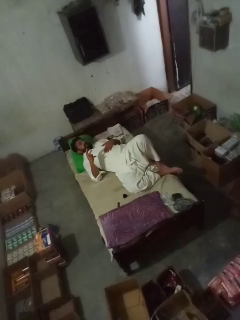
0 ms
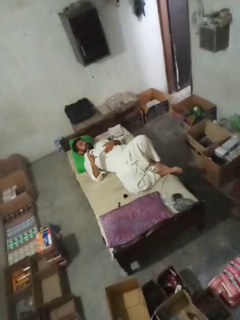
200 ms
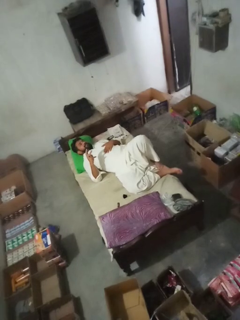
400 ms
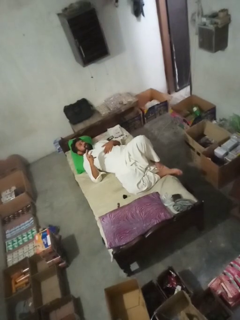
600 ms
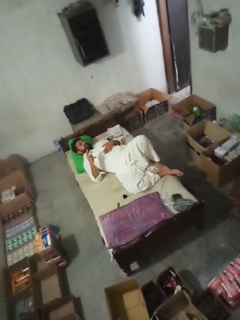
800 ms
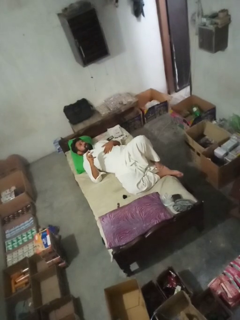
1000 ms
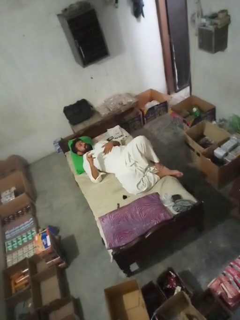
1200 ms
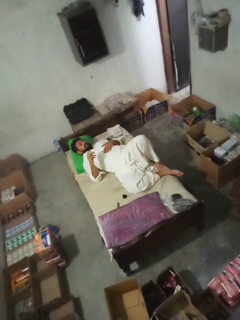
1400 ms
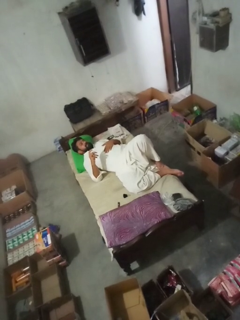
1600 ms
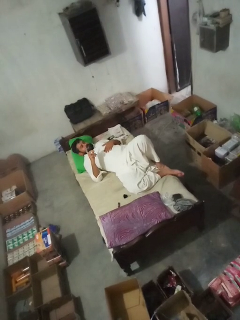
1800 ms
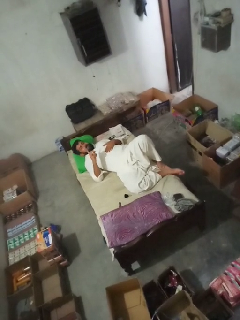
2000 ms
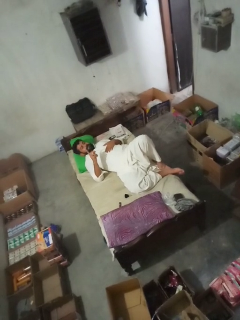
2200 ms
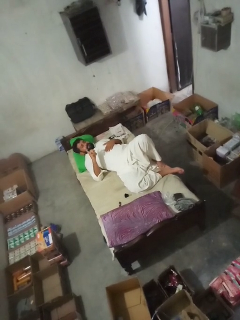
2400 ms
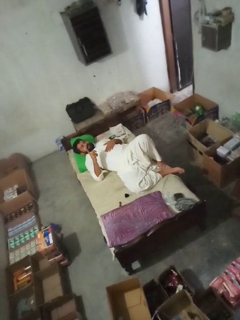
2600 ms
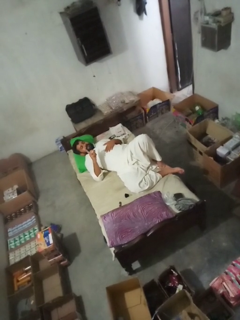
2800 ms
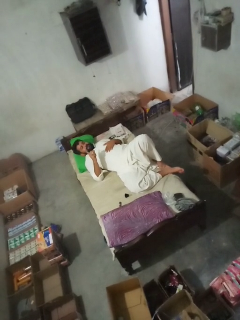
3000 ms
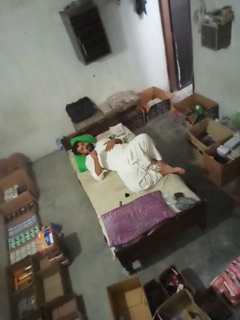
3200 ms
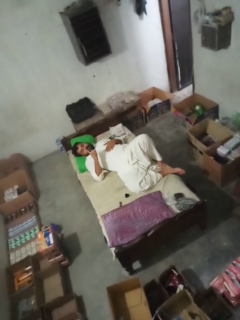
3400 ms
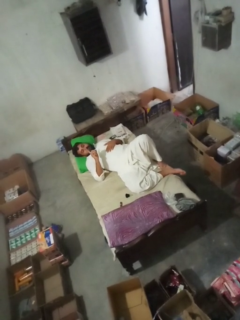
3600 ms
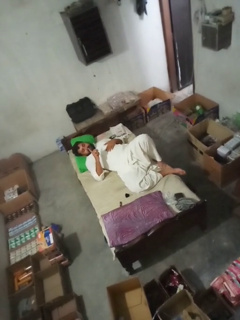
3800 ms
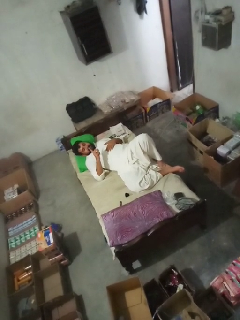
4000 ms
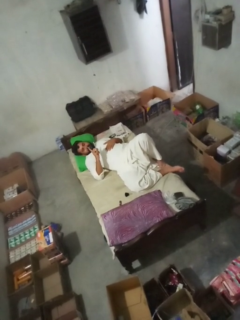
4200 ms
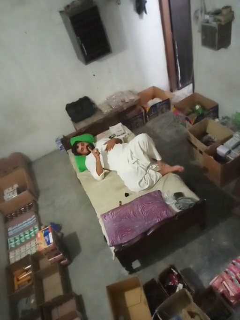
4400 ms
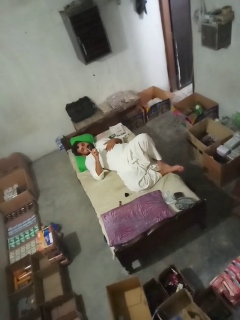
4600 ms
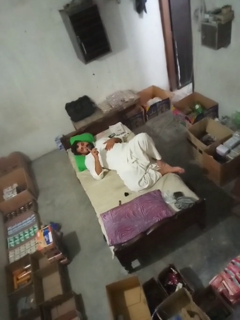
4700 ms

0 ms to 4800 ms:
person nods head

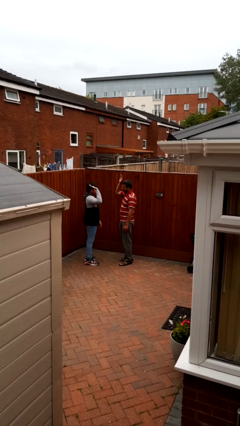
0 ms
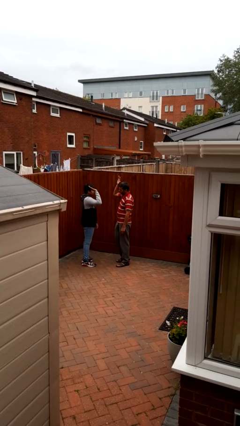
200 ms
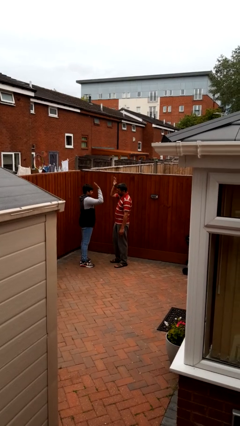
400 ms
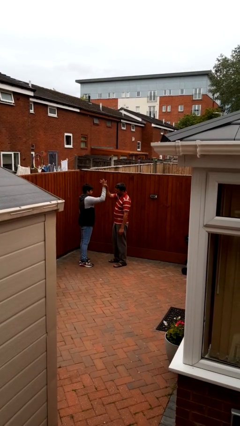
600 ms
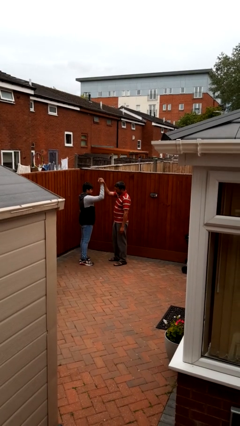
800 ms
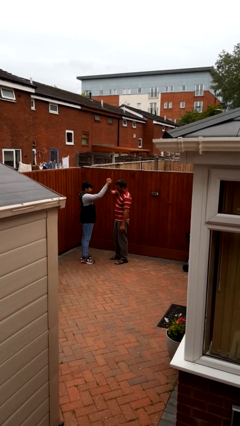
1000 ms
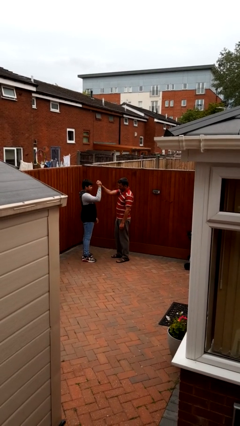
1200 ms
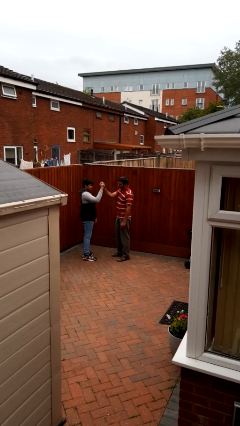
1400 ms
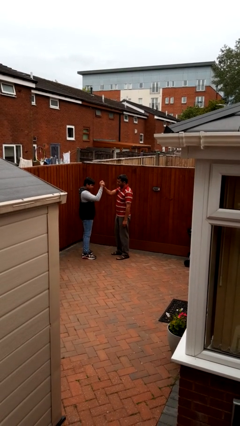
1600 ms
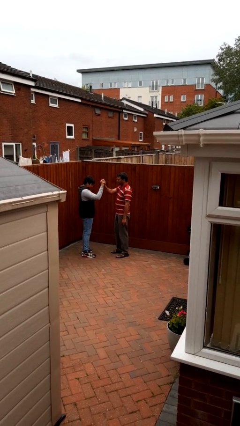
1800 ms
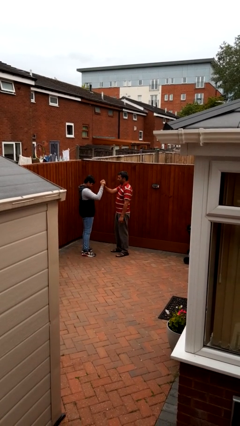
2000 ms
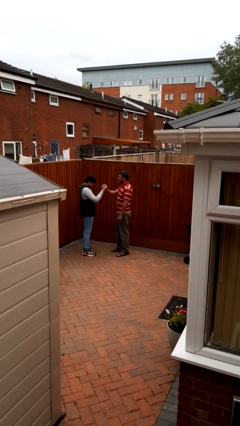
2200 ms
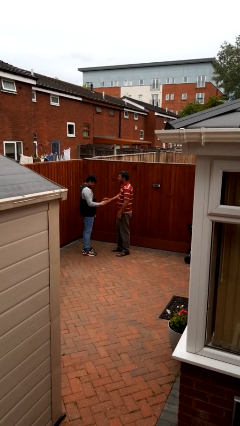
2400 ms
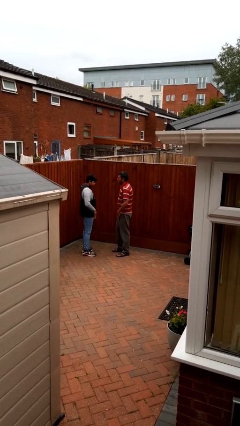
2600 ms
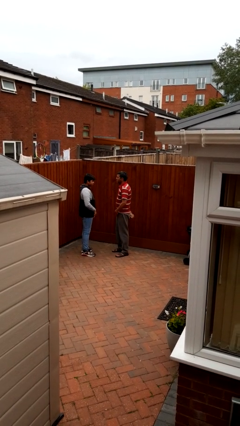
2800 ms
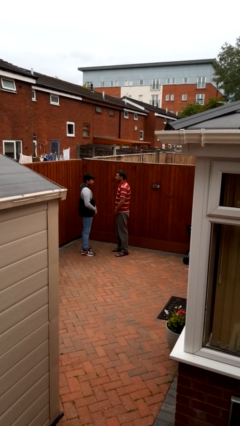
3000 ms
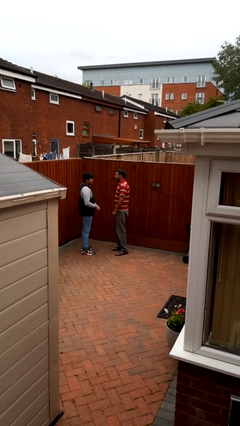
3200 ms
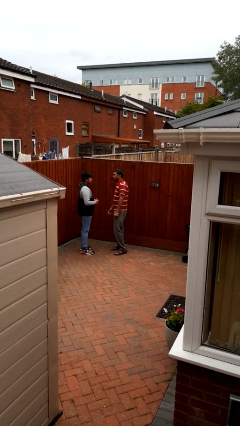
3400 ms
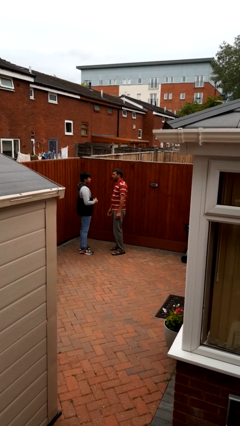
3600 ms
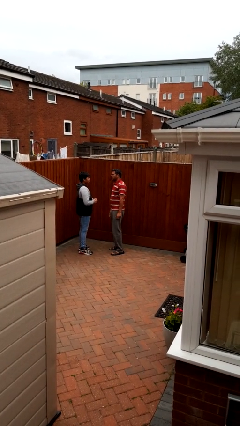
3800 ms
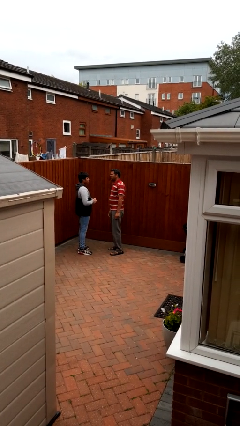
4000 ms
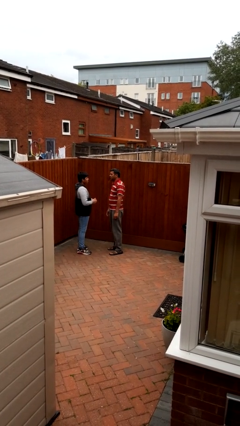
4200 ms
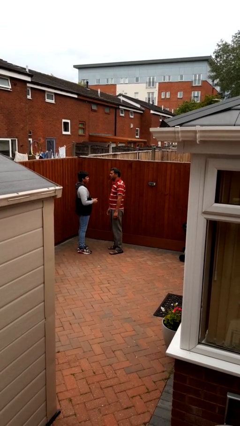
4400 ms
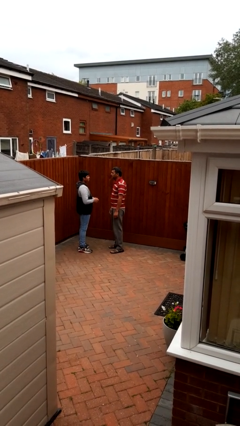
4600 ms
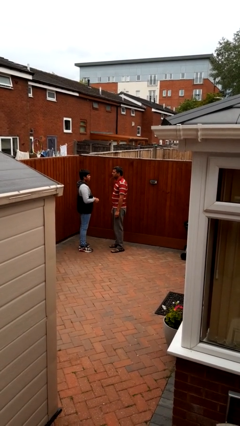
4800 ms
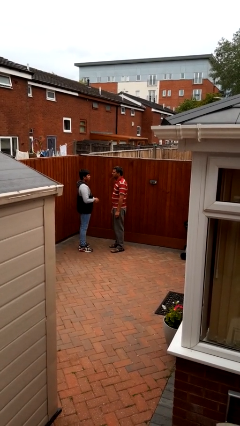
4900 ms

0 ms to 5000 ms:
person highfives hand

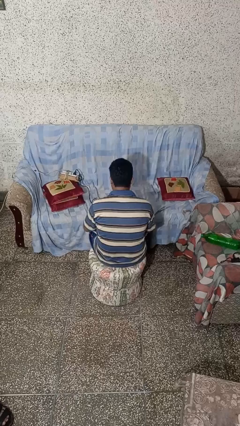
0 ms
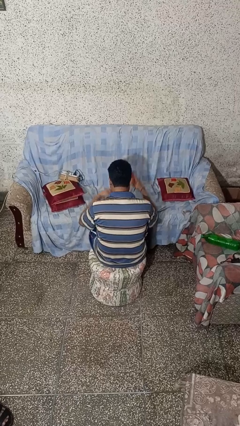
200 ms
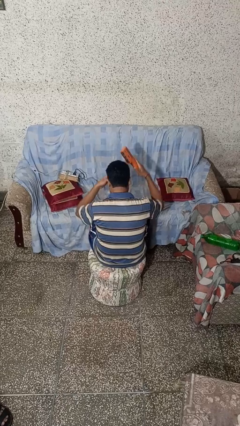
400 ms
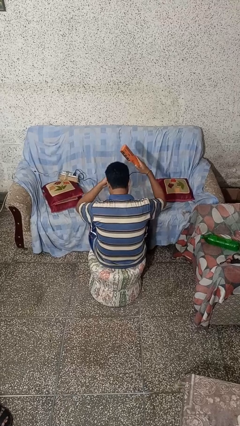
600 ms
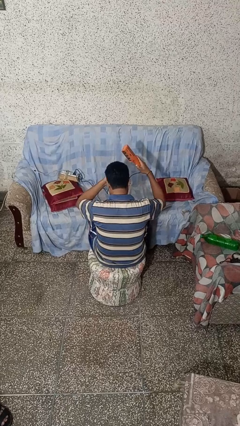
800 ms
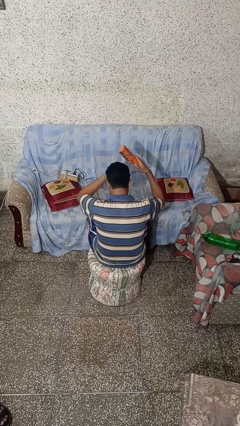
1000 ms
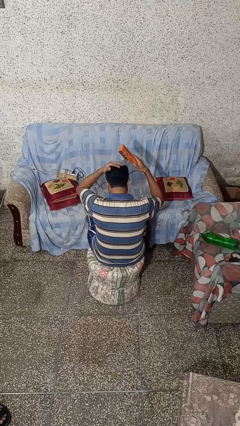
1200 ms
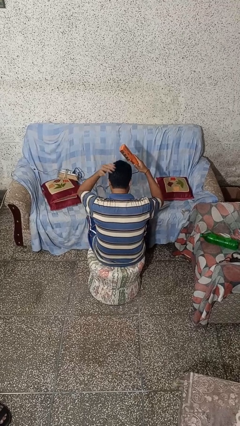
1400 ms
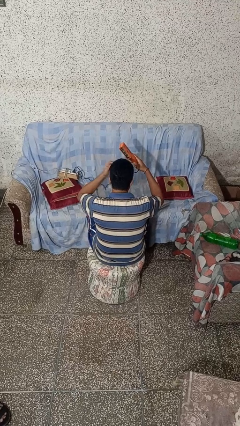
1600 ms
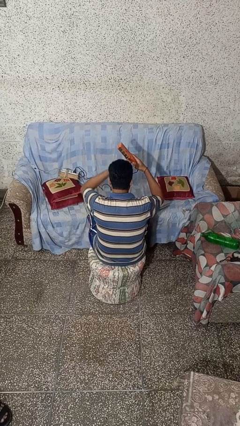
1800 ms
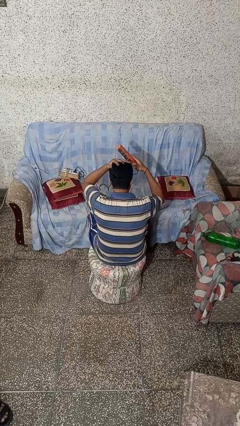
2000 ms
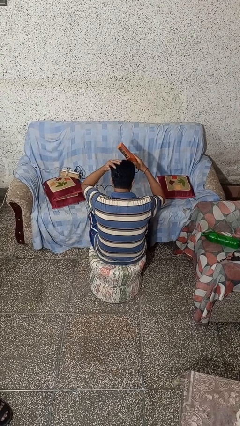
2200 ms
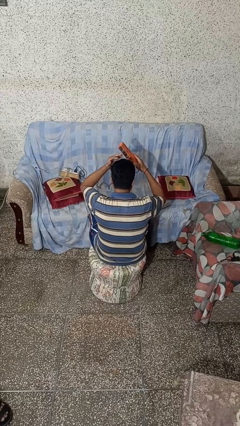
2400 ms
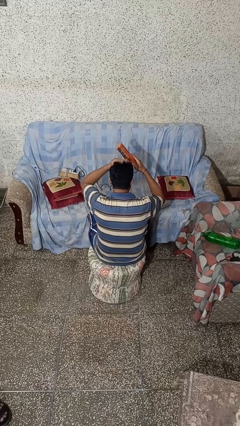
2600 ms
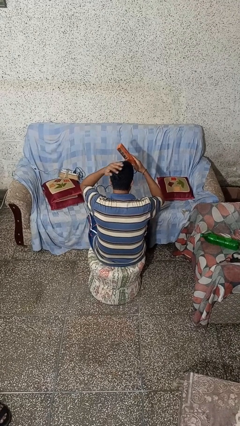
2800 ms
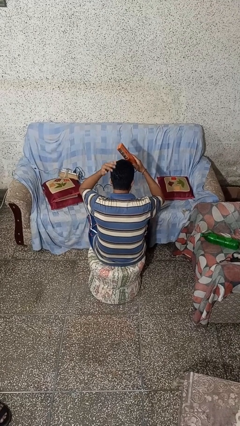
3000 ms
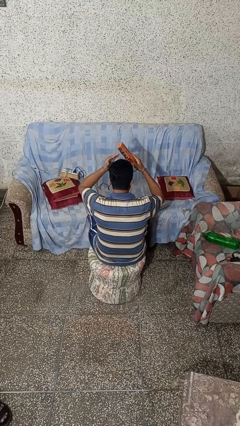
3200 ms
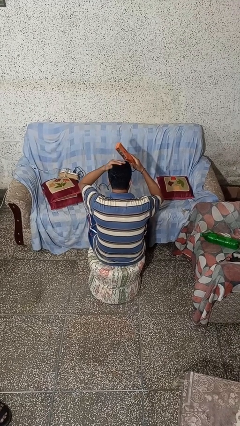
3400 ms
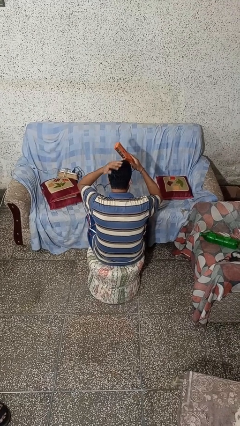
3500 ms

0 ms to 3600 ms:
person dries hair with hairdryer

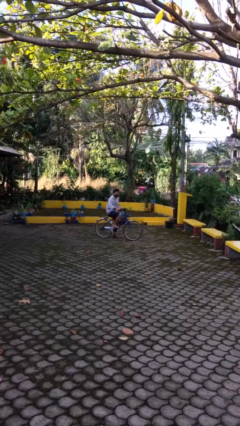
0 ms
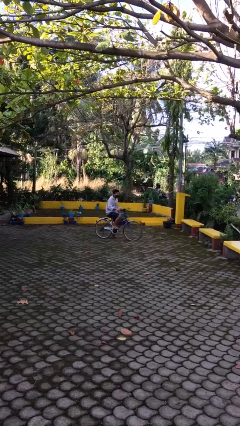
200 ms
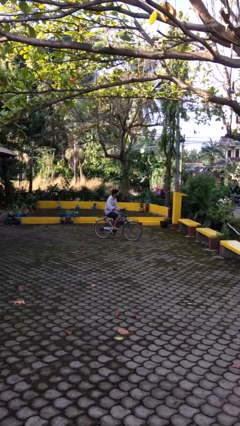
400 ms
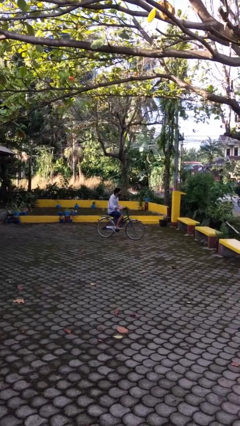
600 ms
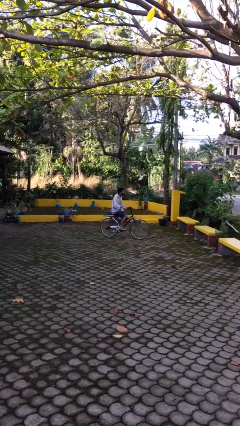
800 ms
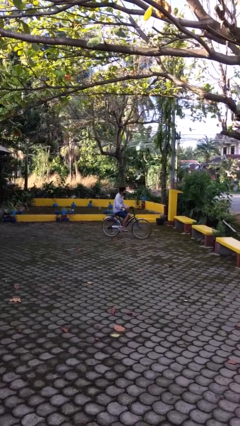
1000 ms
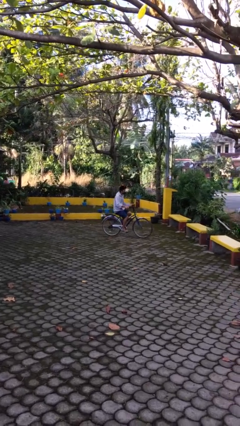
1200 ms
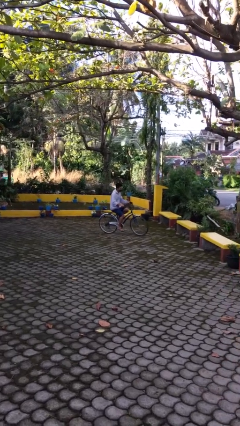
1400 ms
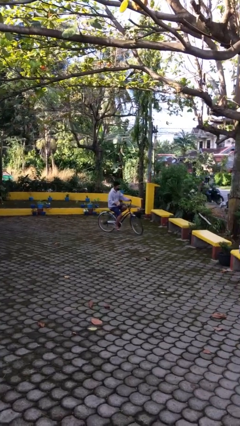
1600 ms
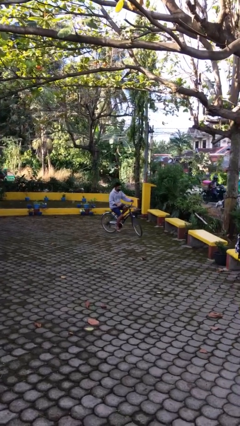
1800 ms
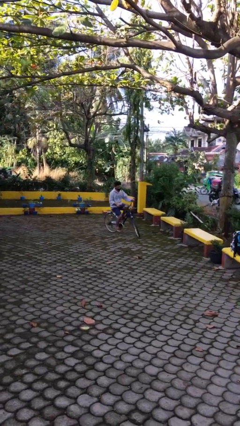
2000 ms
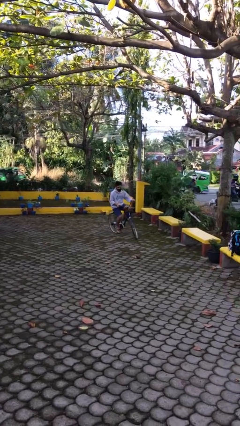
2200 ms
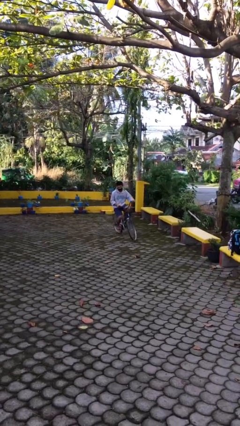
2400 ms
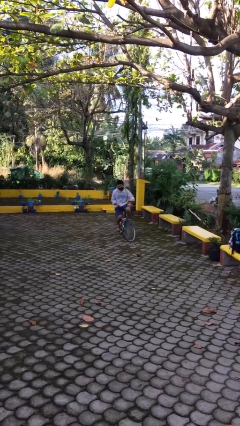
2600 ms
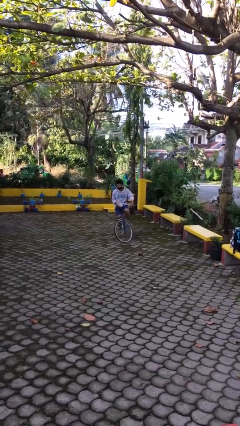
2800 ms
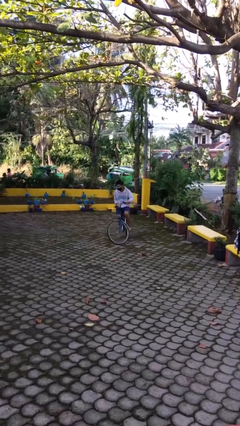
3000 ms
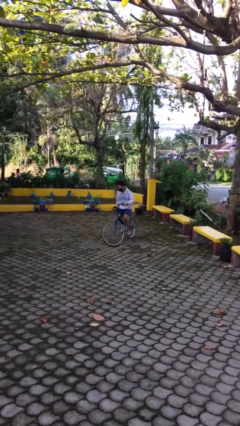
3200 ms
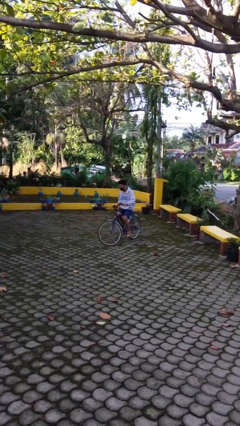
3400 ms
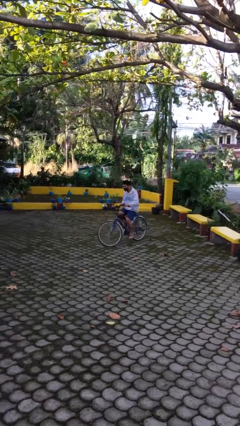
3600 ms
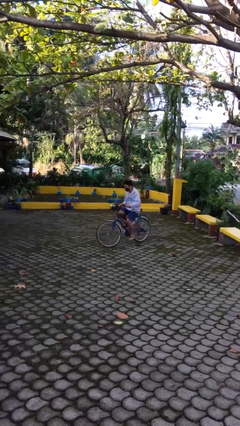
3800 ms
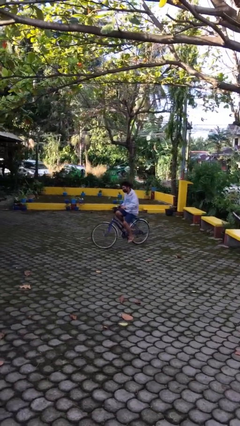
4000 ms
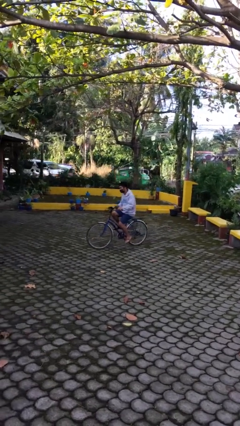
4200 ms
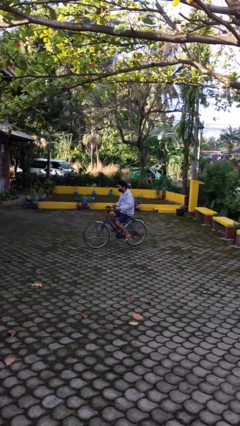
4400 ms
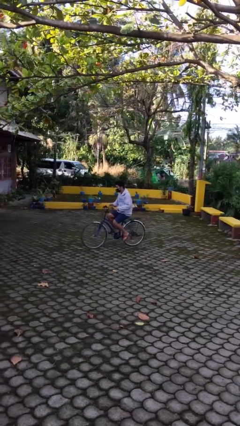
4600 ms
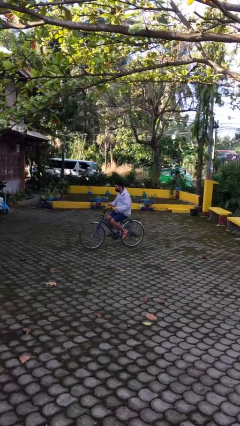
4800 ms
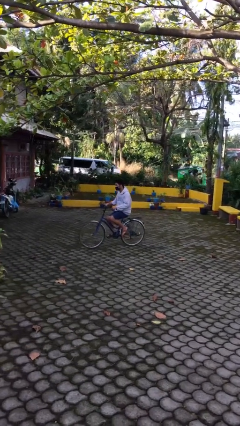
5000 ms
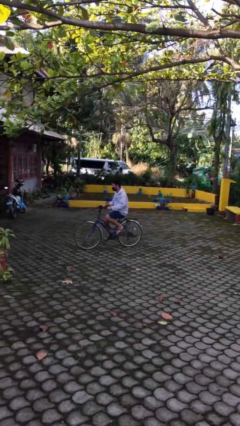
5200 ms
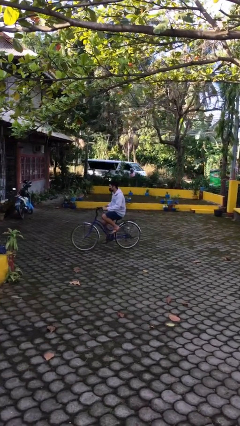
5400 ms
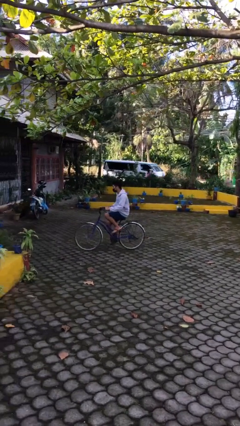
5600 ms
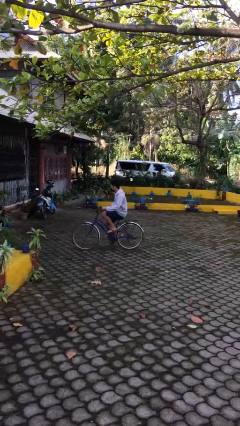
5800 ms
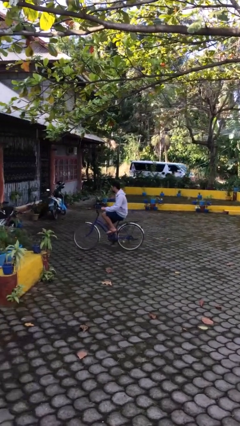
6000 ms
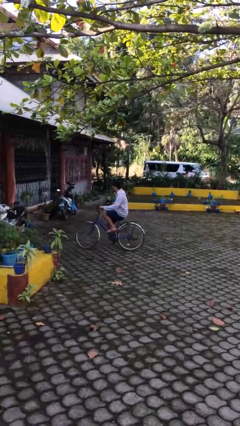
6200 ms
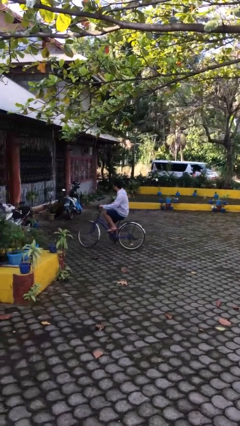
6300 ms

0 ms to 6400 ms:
person rides bicycle
